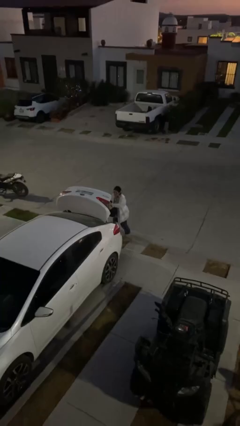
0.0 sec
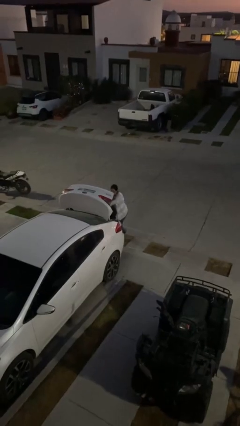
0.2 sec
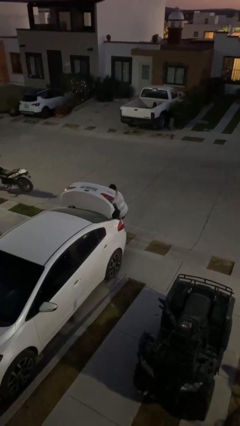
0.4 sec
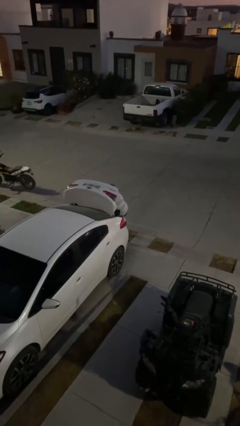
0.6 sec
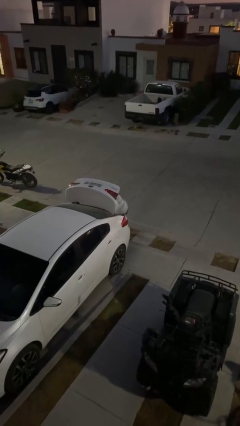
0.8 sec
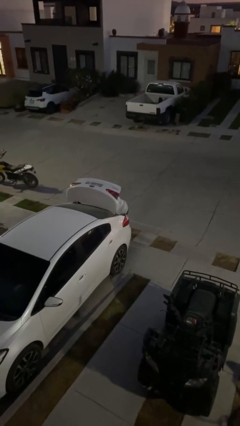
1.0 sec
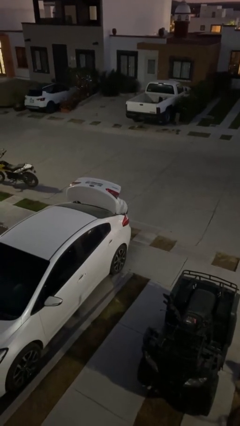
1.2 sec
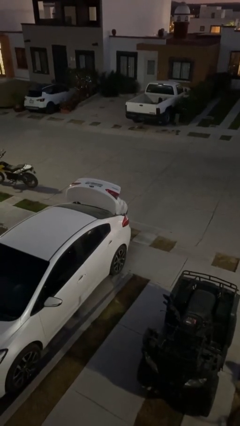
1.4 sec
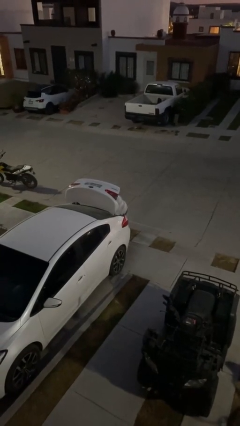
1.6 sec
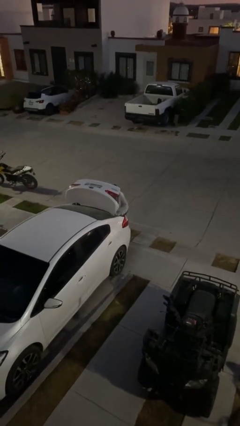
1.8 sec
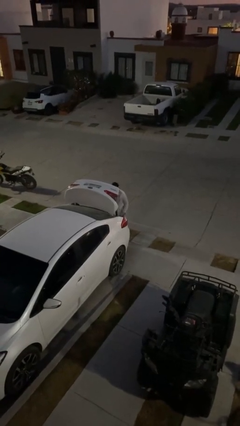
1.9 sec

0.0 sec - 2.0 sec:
person loads car

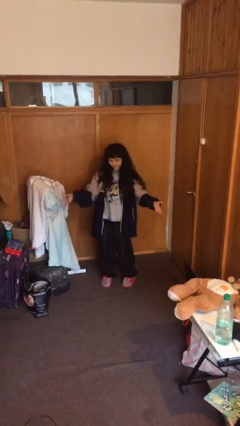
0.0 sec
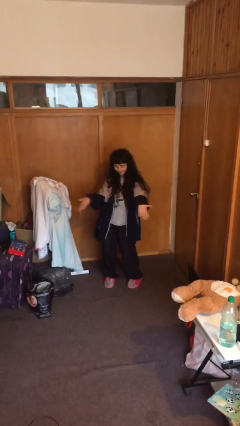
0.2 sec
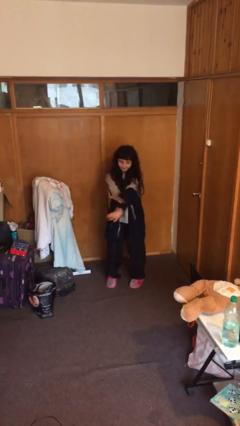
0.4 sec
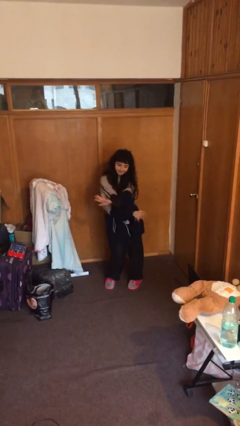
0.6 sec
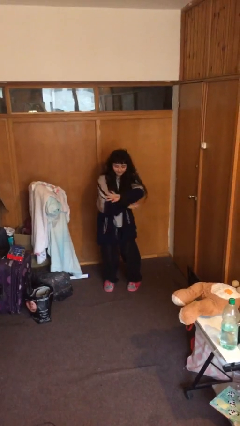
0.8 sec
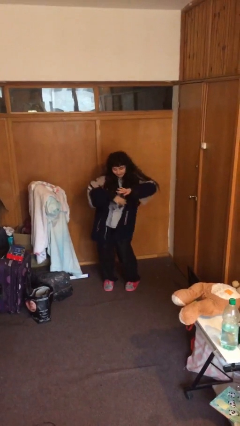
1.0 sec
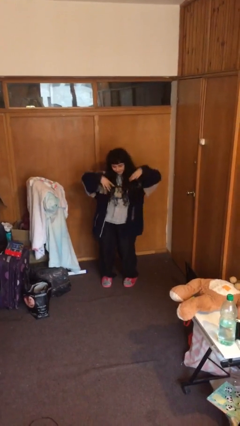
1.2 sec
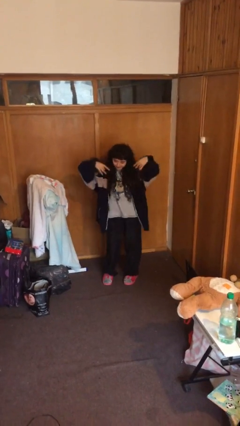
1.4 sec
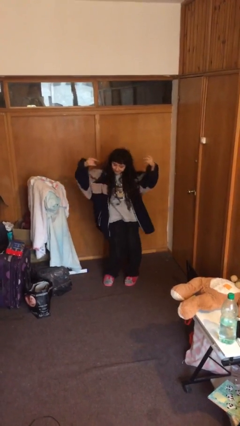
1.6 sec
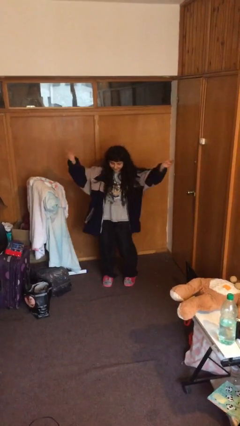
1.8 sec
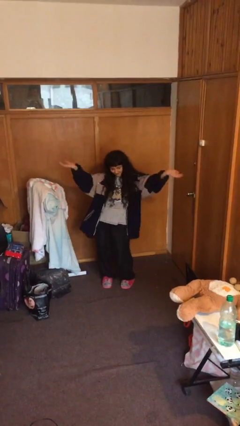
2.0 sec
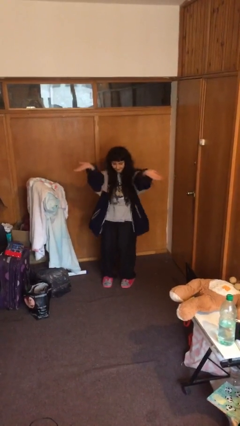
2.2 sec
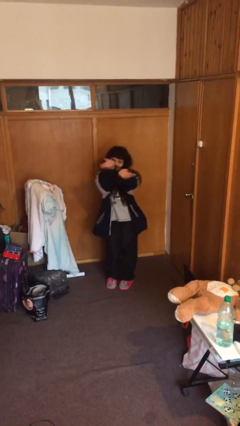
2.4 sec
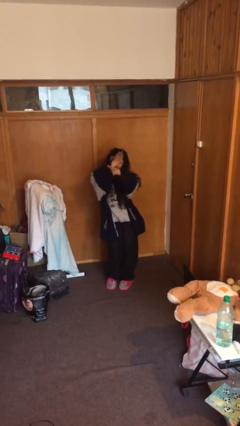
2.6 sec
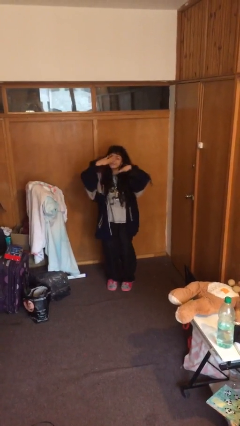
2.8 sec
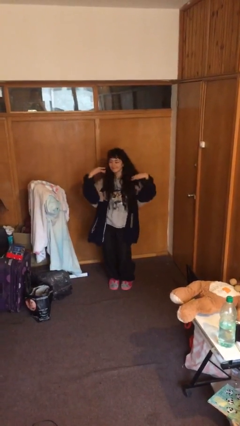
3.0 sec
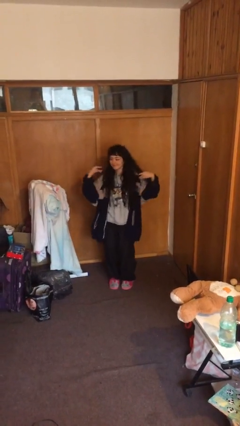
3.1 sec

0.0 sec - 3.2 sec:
person dances in place

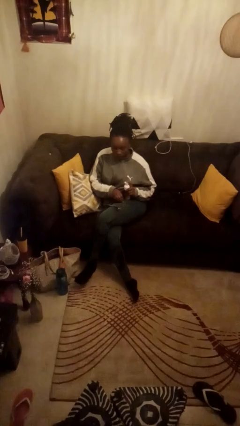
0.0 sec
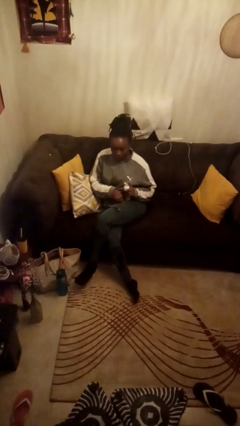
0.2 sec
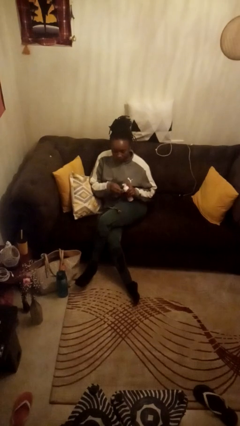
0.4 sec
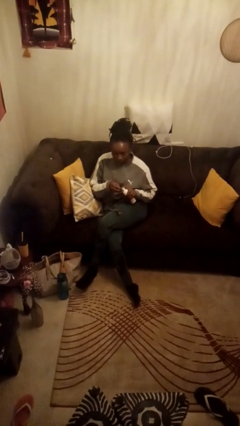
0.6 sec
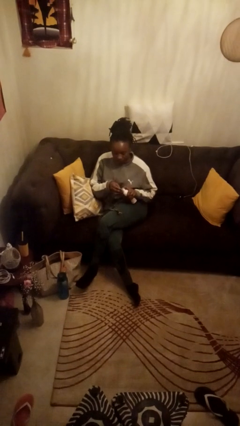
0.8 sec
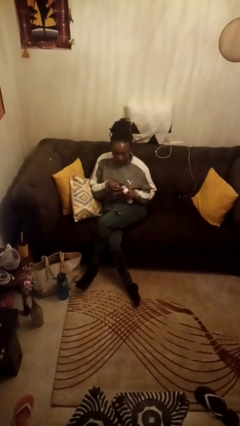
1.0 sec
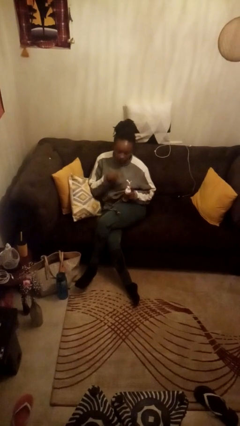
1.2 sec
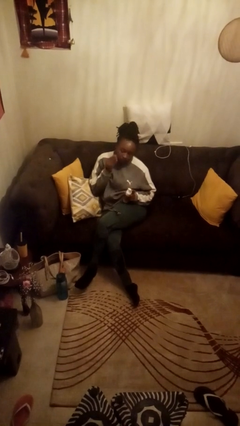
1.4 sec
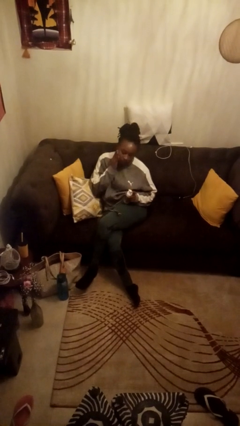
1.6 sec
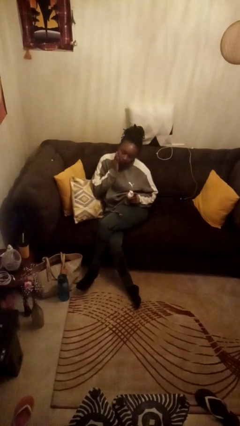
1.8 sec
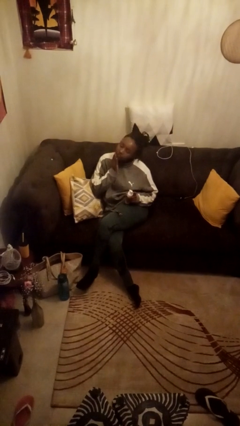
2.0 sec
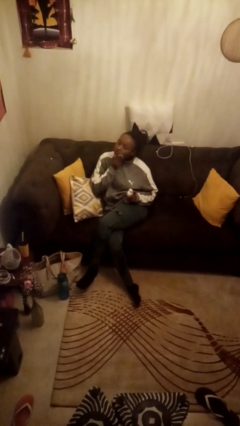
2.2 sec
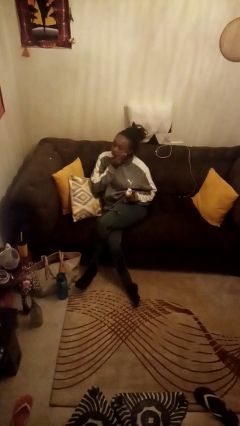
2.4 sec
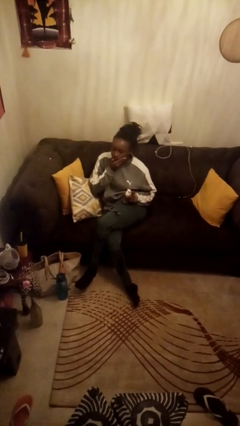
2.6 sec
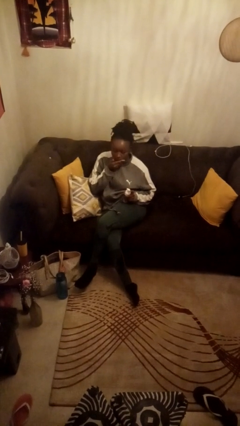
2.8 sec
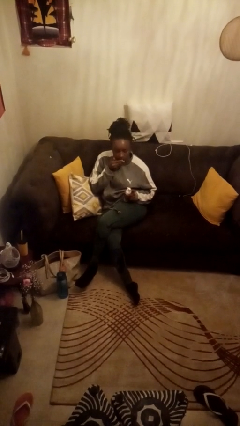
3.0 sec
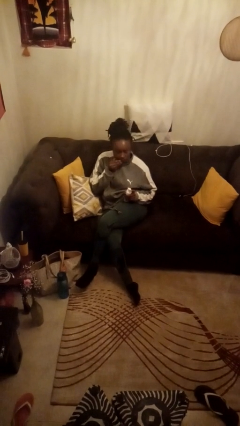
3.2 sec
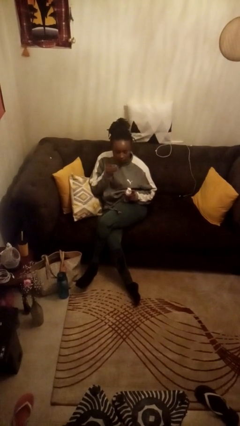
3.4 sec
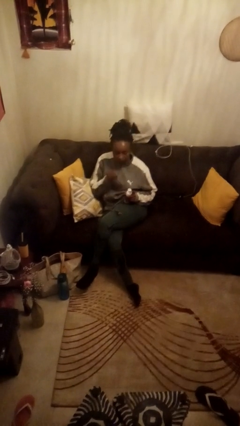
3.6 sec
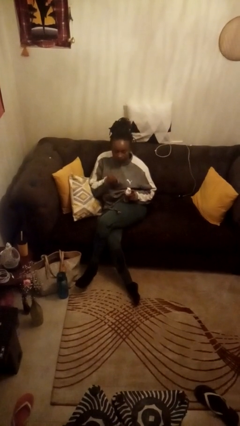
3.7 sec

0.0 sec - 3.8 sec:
person applies shaving cream

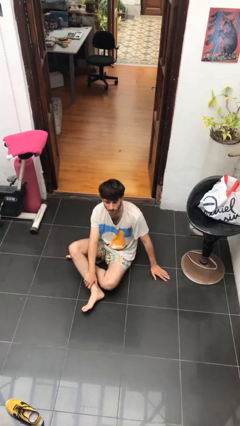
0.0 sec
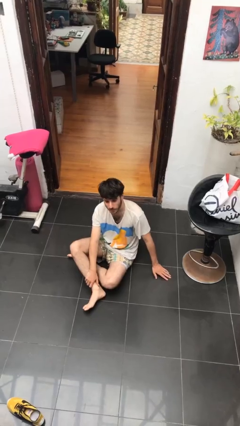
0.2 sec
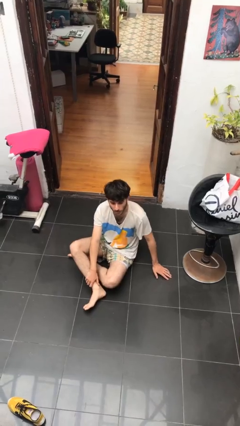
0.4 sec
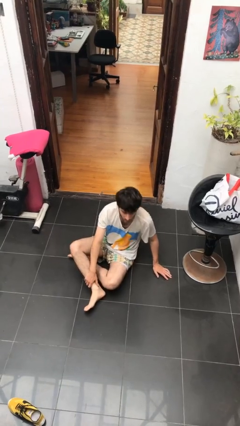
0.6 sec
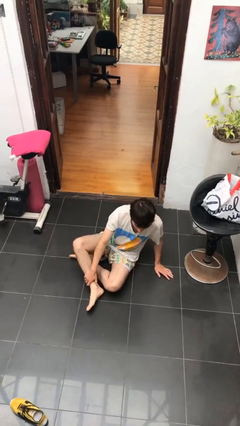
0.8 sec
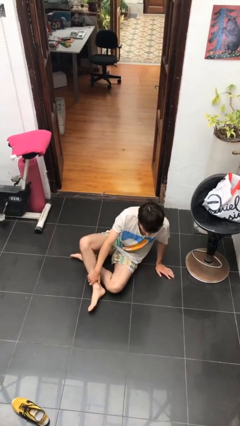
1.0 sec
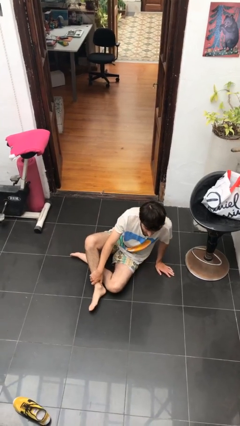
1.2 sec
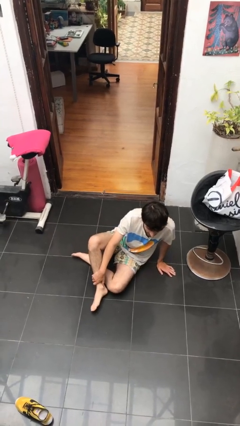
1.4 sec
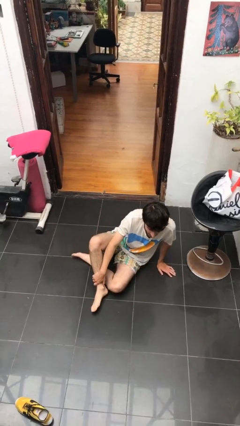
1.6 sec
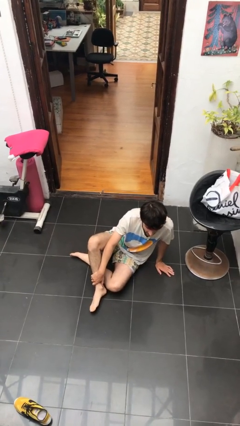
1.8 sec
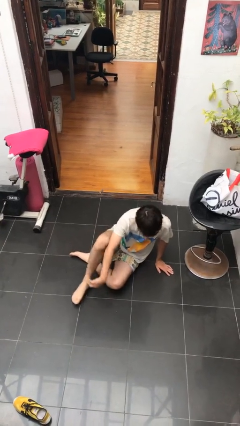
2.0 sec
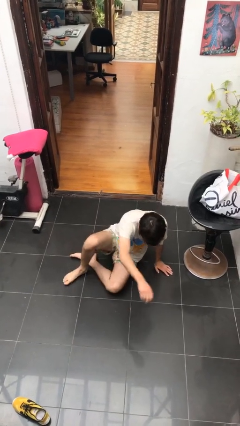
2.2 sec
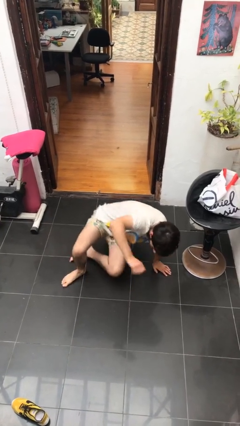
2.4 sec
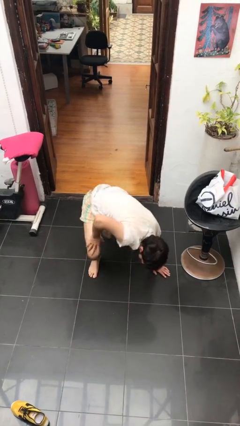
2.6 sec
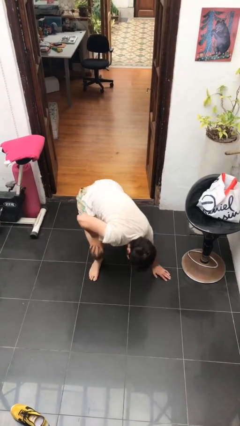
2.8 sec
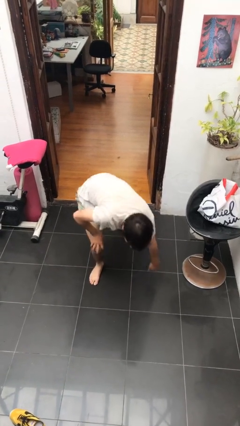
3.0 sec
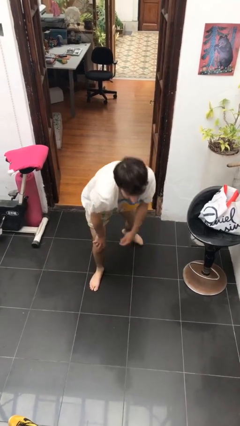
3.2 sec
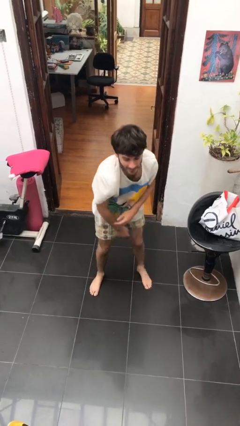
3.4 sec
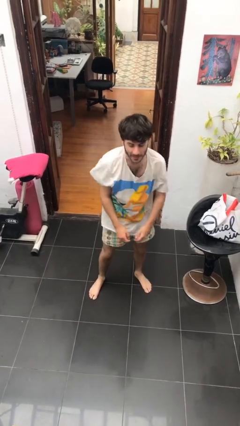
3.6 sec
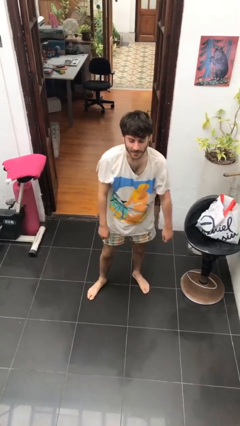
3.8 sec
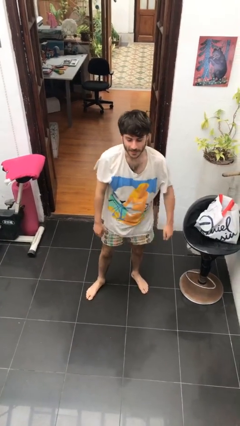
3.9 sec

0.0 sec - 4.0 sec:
person stands up

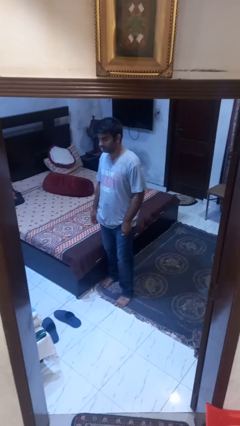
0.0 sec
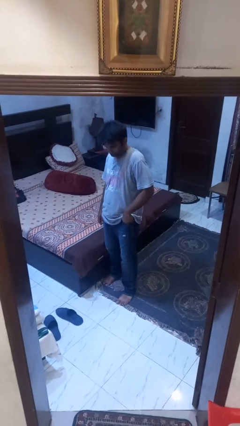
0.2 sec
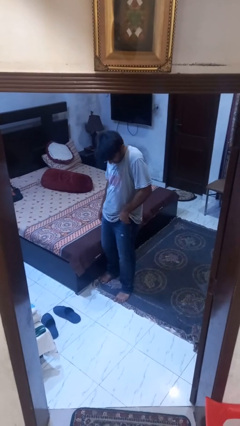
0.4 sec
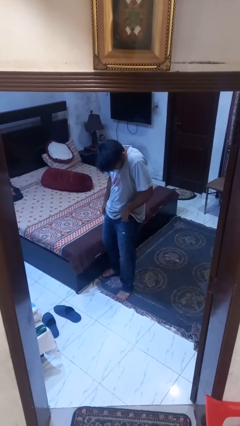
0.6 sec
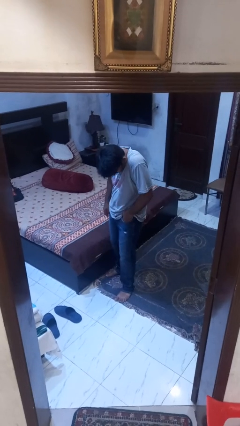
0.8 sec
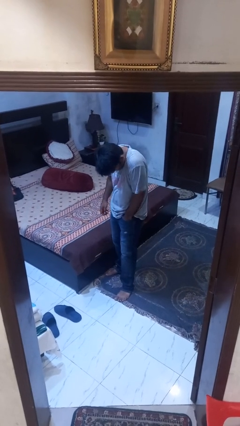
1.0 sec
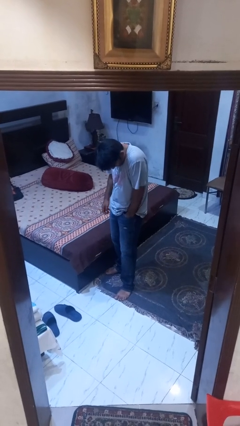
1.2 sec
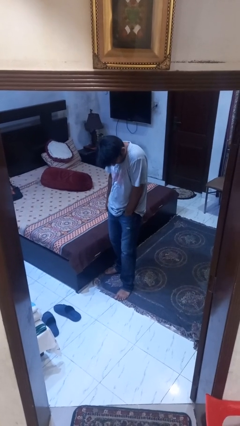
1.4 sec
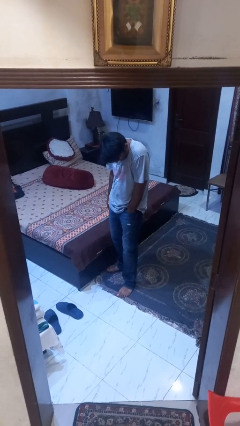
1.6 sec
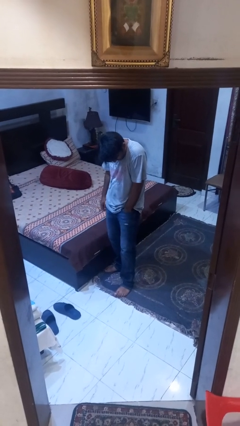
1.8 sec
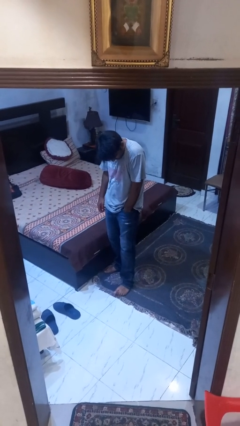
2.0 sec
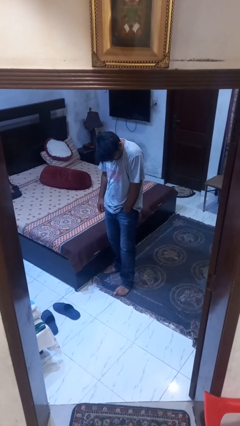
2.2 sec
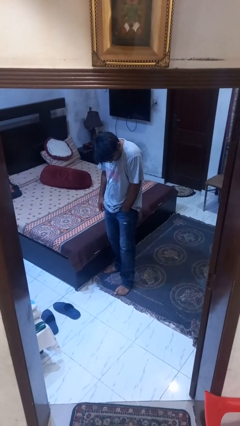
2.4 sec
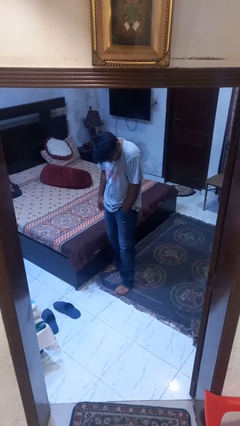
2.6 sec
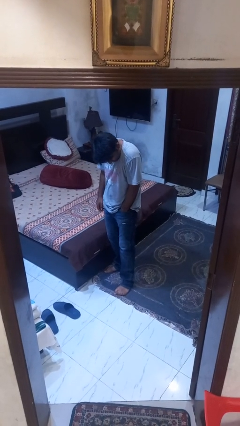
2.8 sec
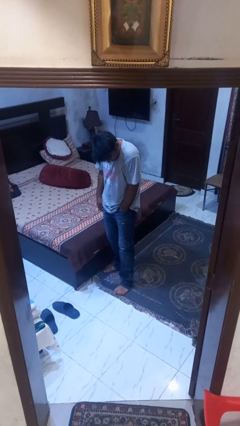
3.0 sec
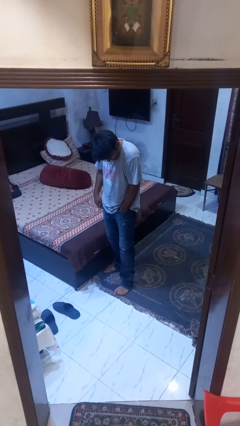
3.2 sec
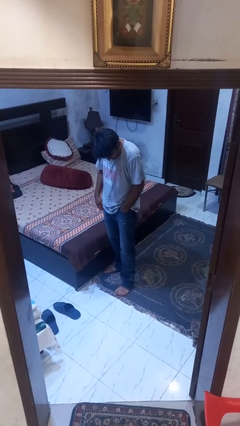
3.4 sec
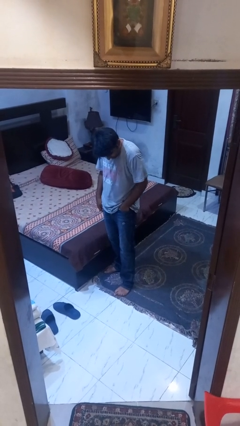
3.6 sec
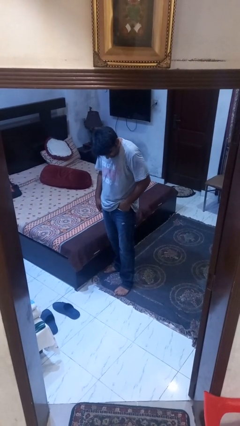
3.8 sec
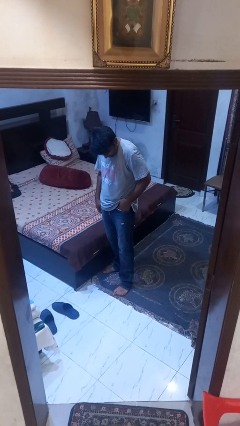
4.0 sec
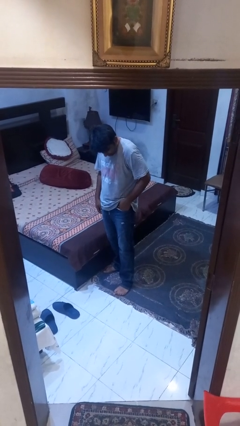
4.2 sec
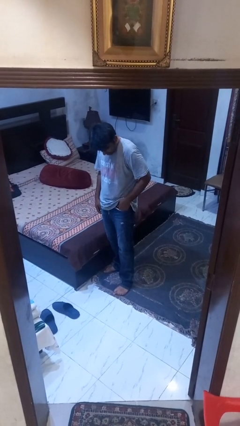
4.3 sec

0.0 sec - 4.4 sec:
person puts hands in back pockets
